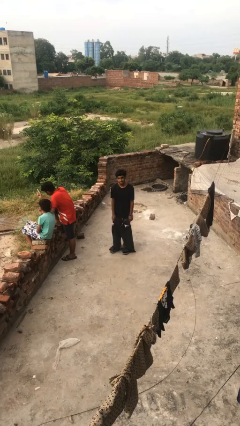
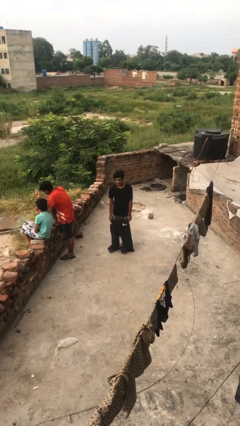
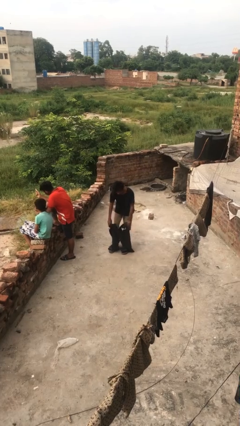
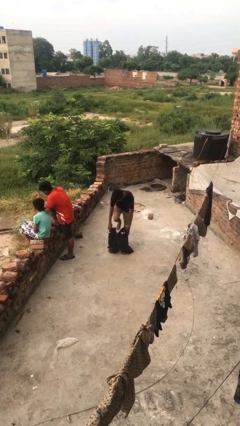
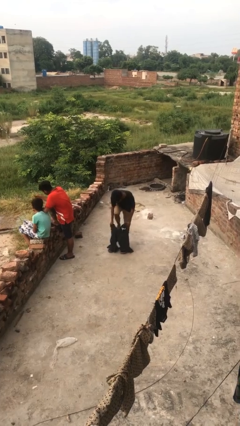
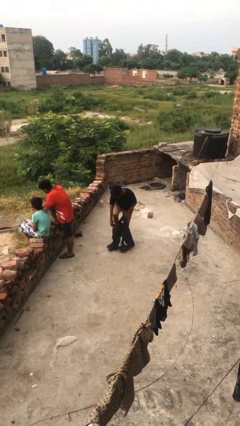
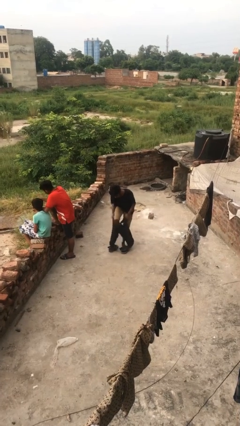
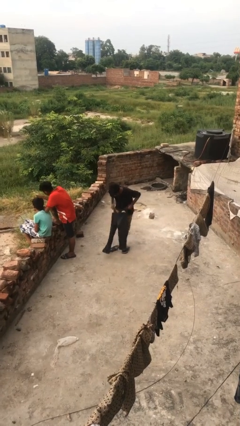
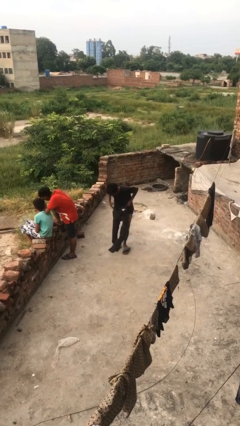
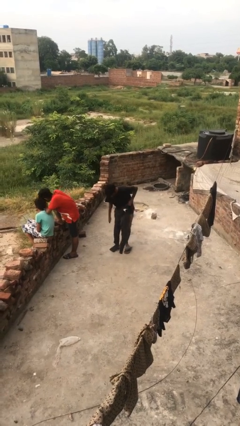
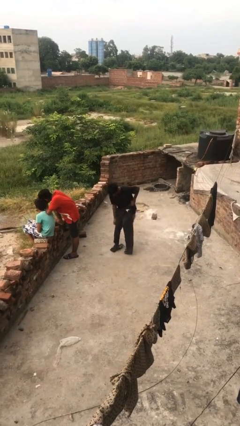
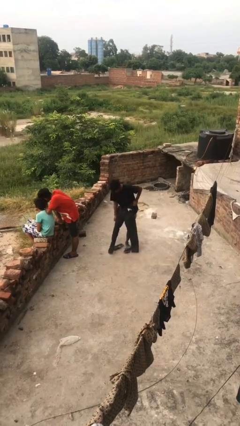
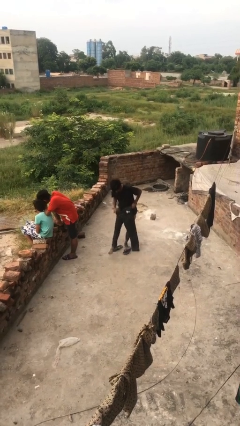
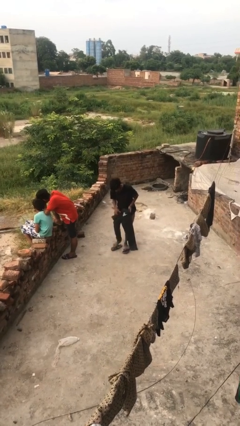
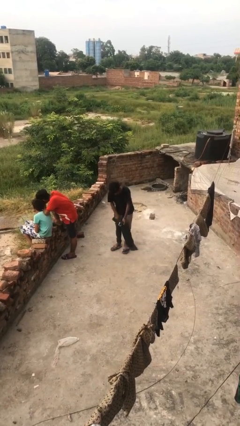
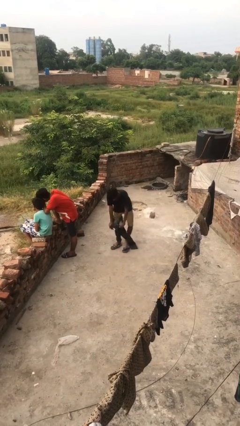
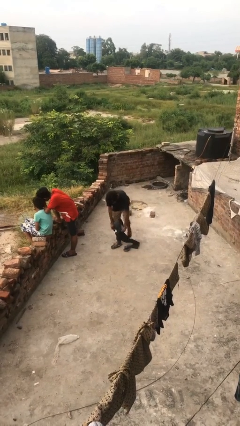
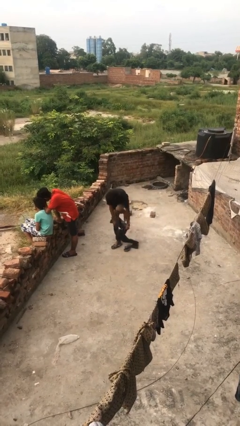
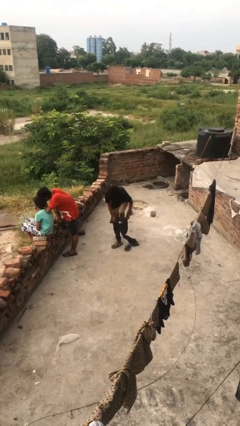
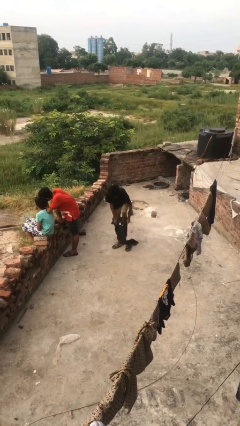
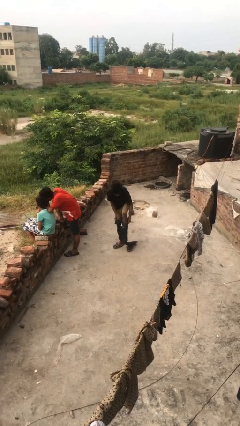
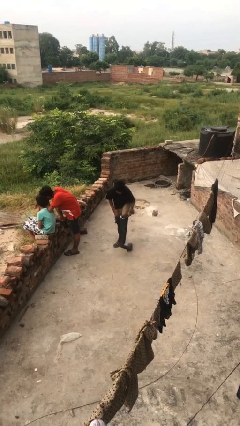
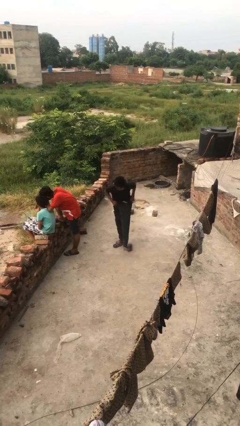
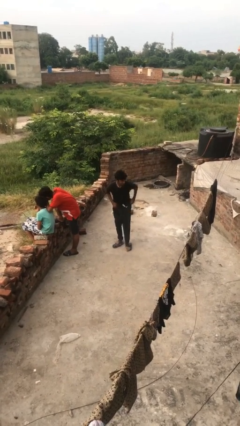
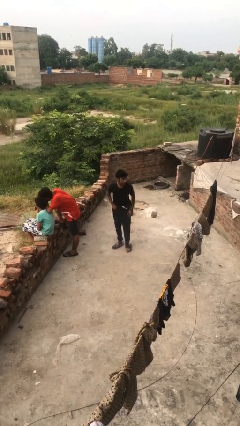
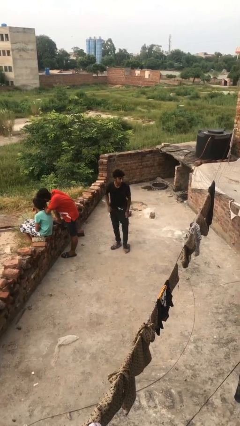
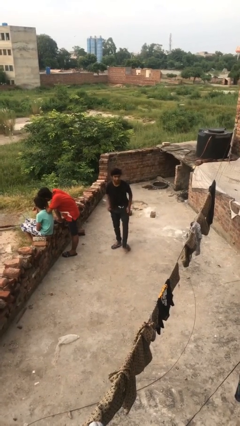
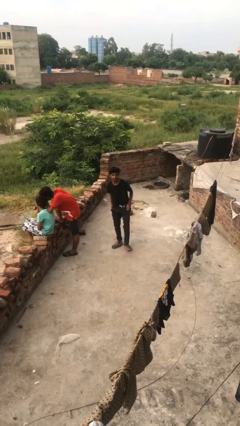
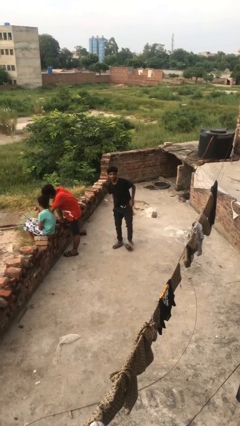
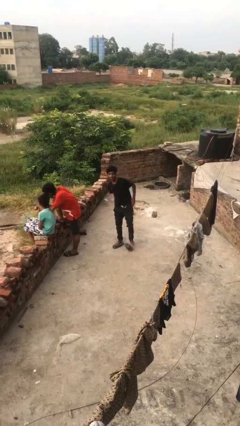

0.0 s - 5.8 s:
person takes off pants

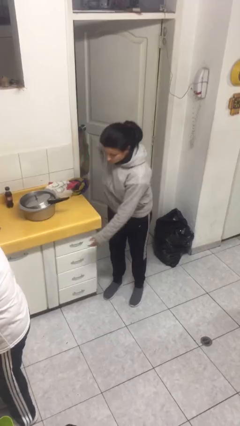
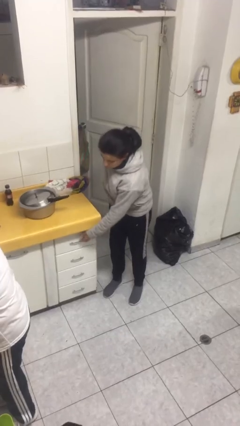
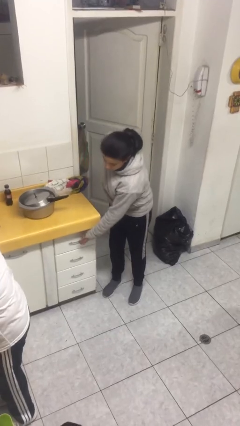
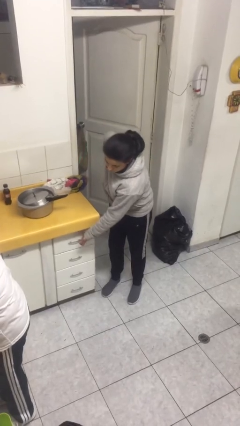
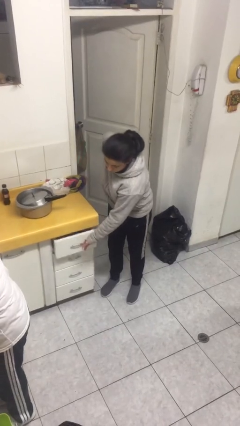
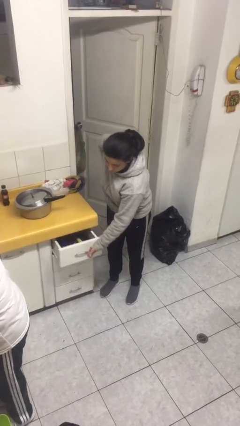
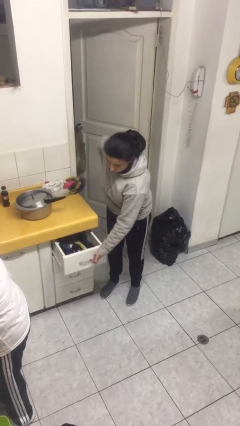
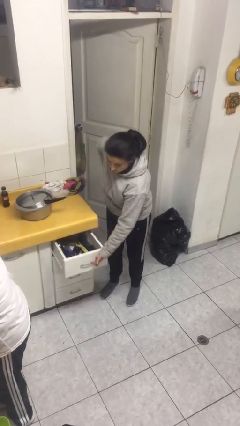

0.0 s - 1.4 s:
person opens kitchen drawer

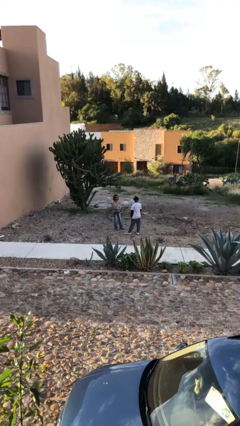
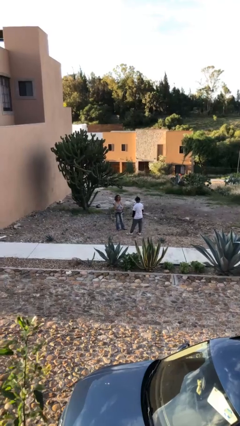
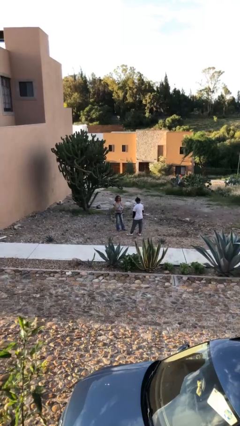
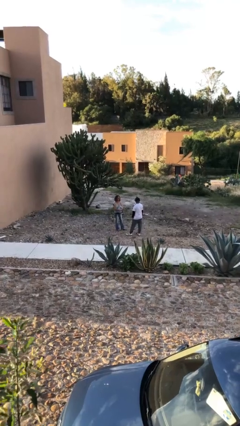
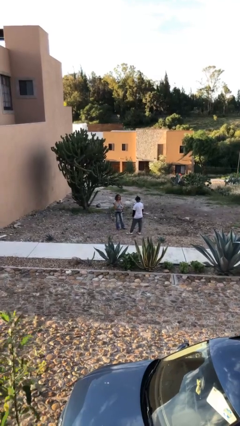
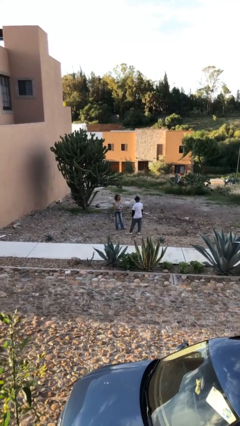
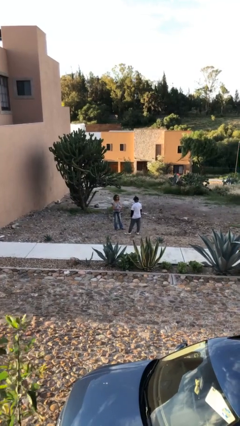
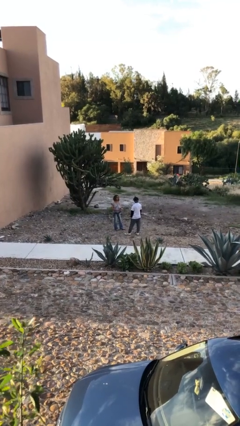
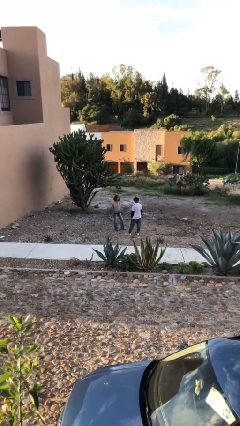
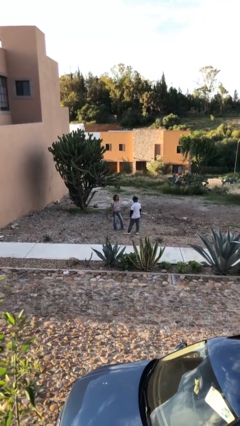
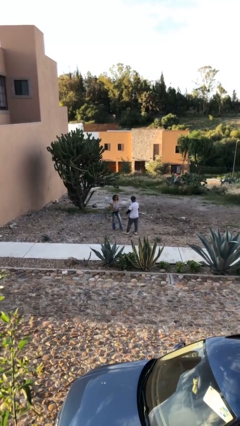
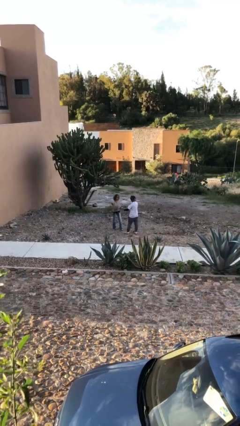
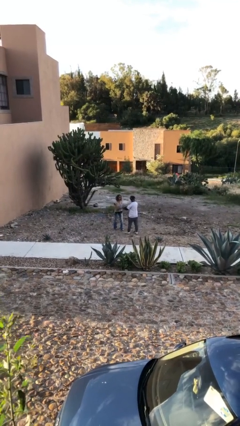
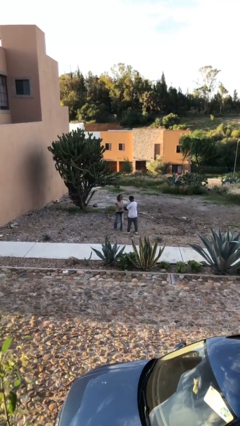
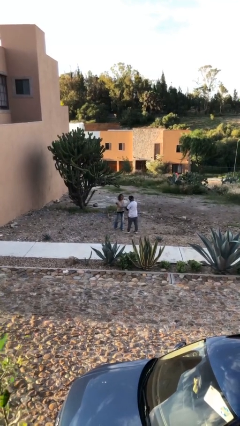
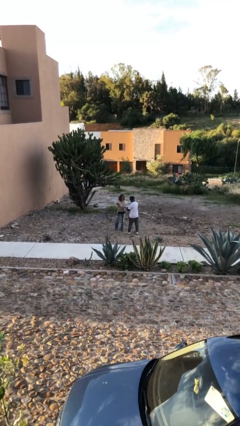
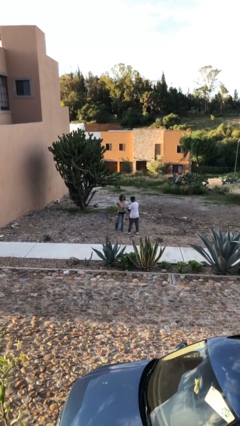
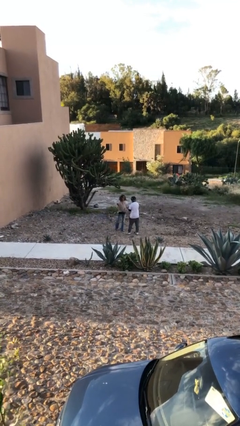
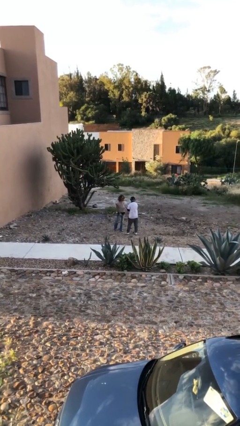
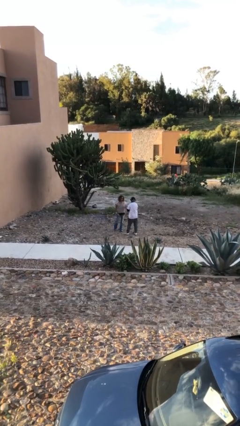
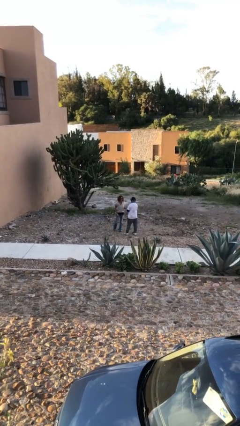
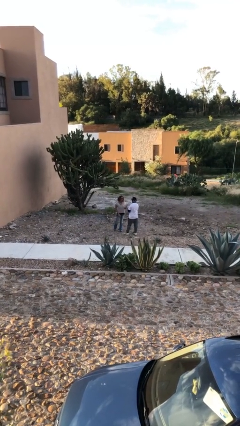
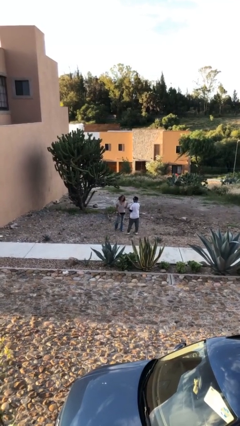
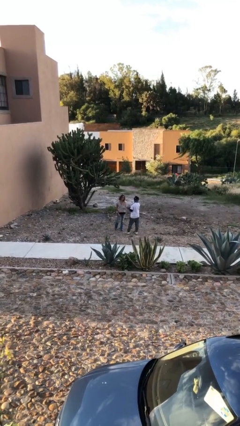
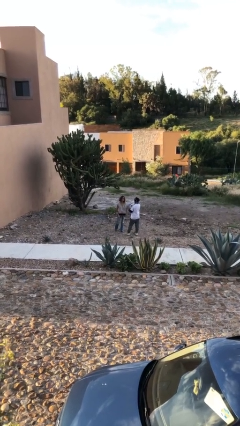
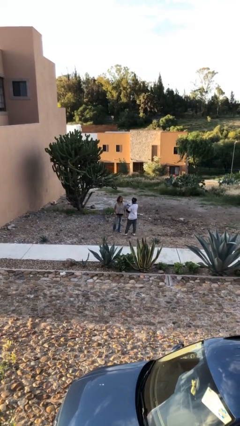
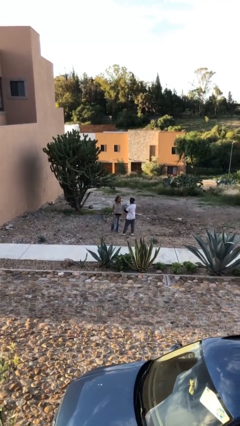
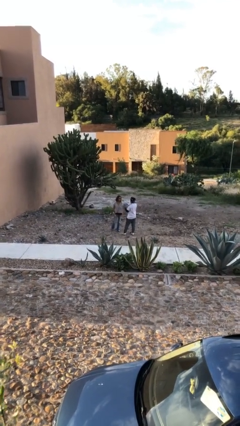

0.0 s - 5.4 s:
person transfers object to person

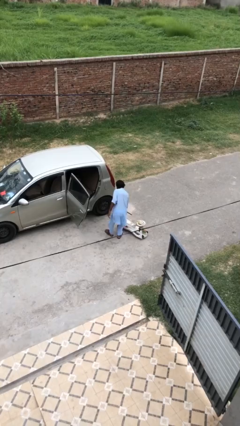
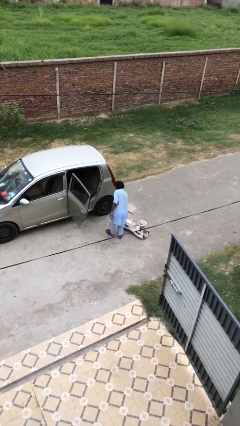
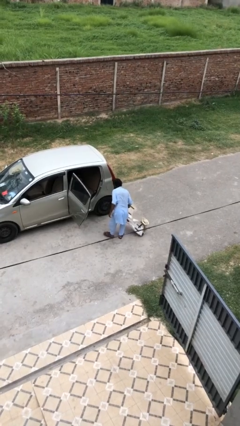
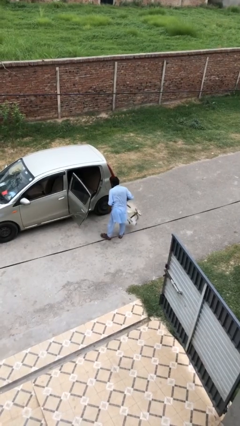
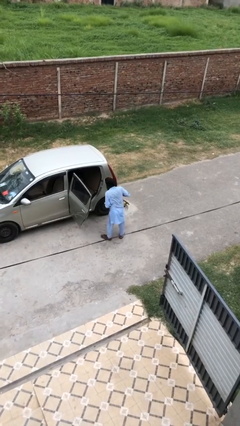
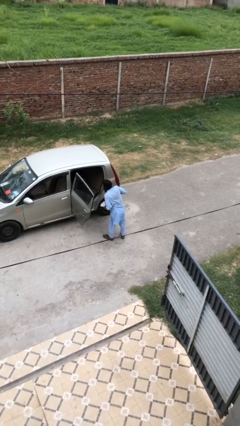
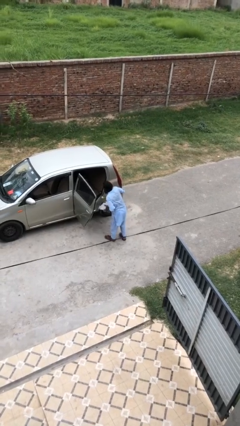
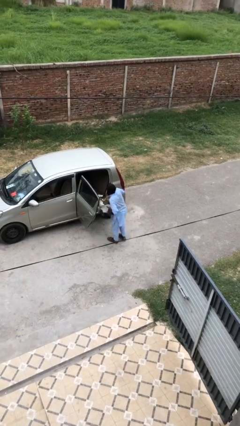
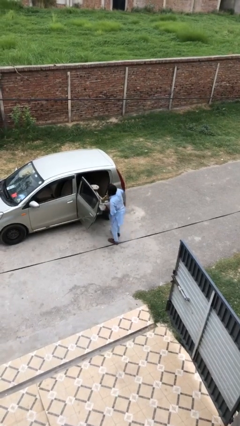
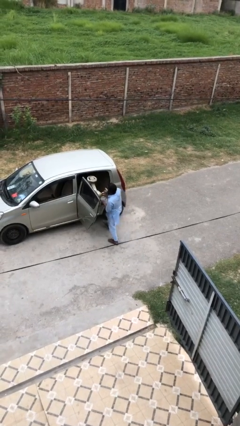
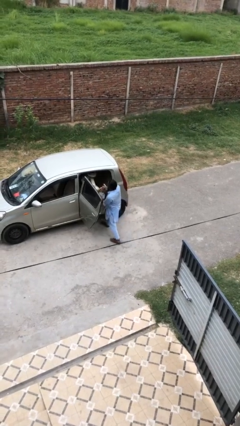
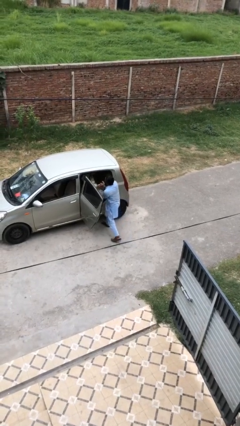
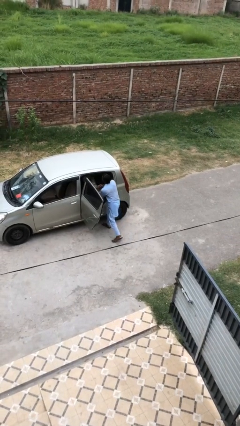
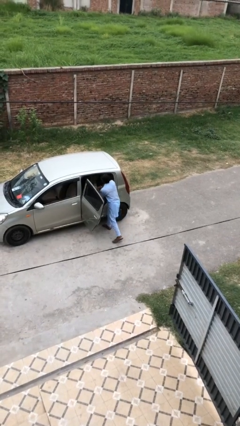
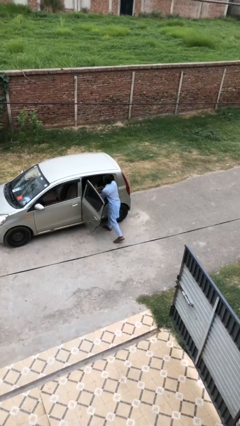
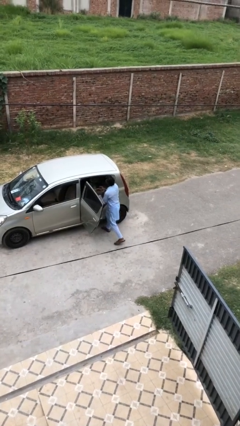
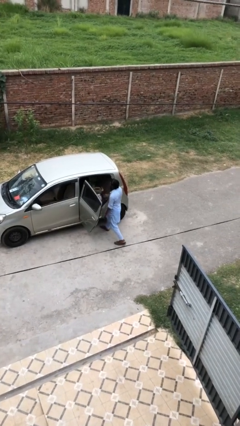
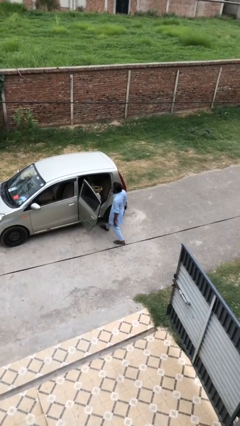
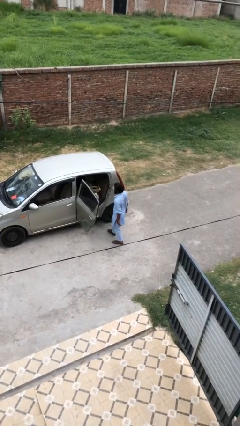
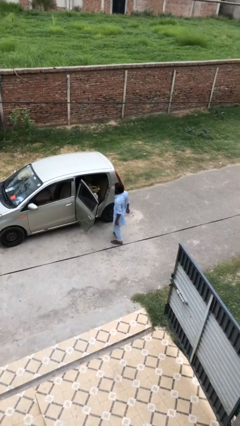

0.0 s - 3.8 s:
person loads car

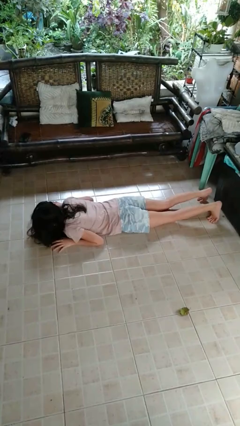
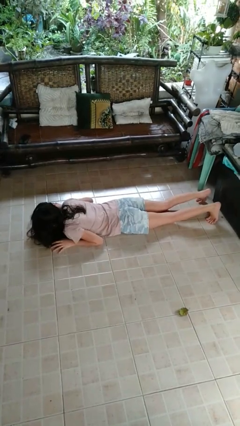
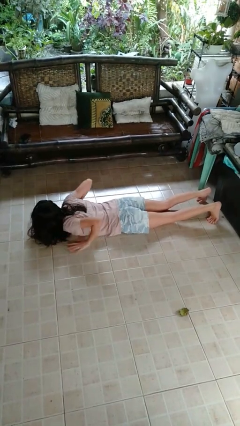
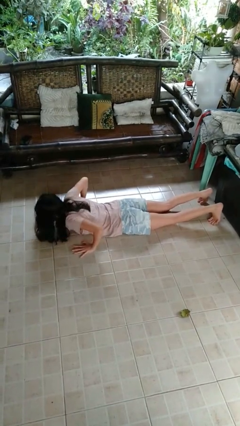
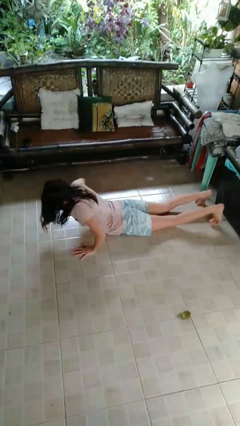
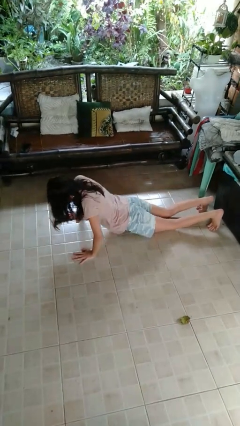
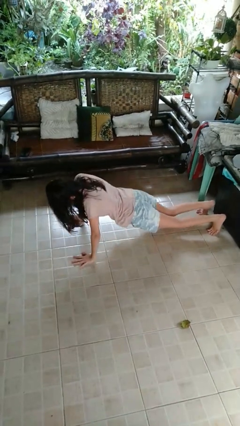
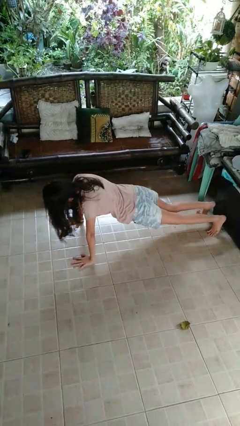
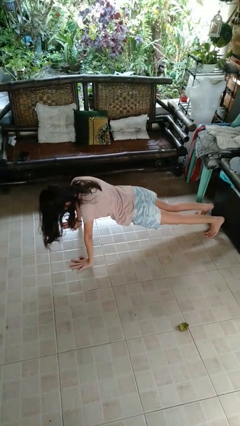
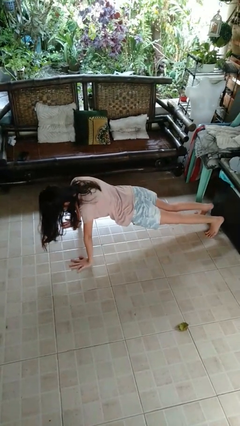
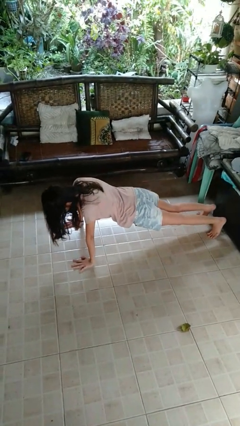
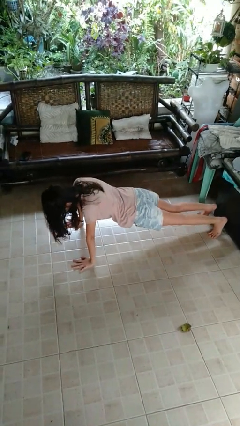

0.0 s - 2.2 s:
person exercises with pushup
